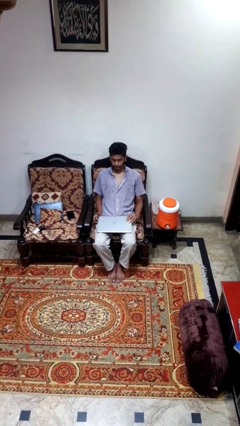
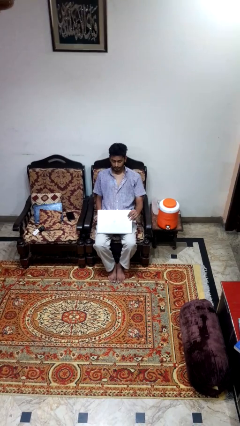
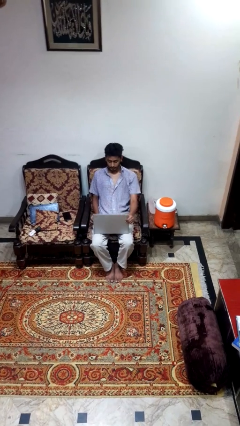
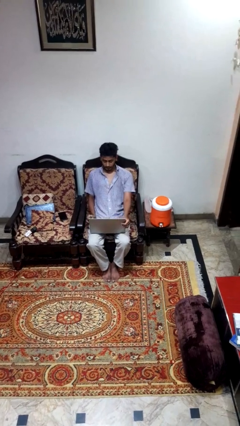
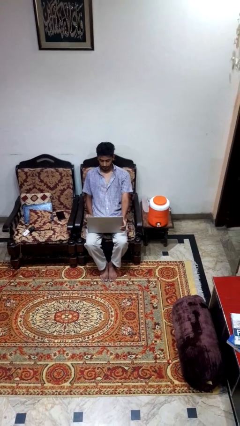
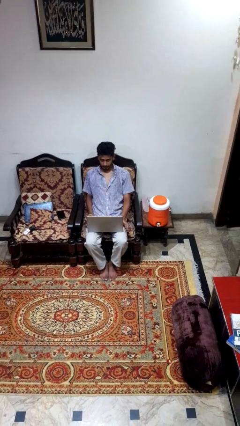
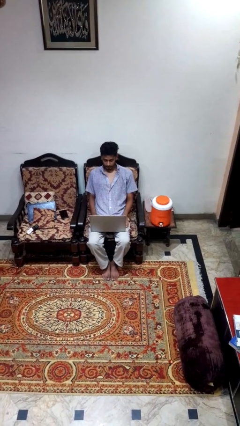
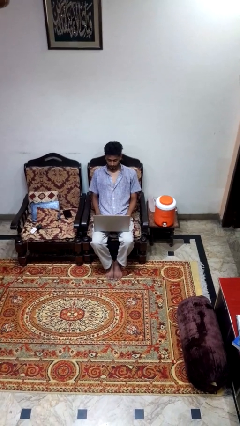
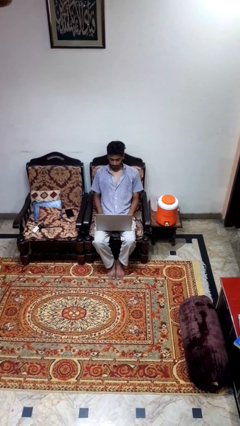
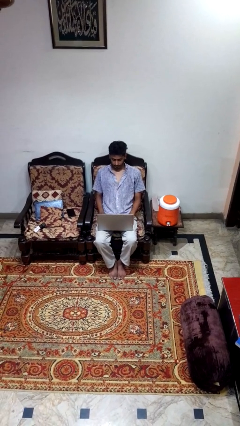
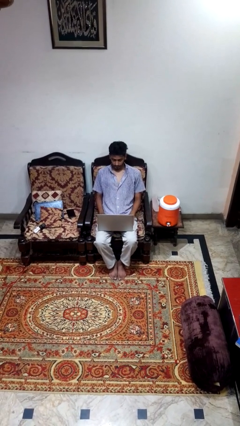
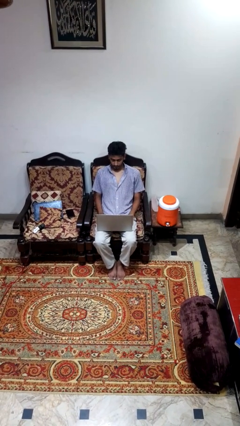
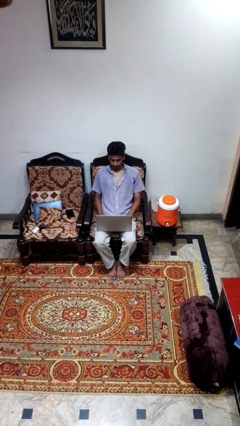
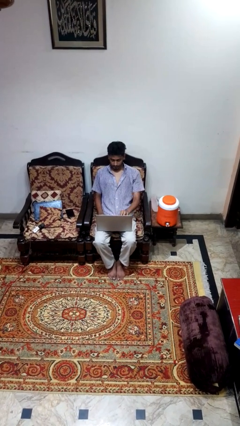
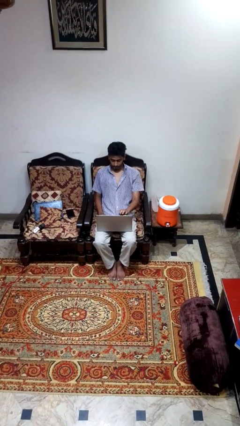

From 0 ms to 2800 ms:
person opens laptop

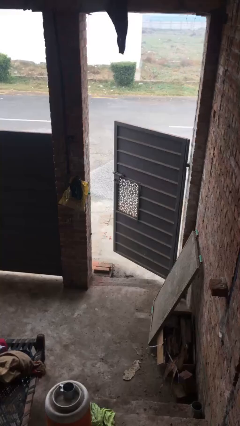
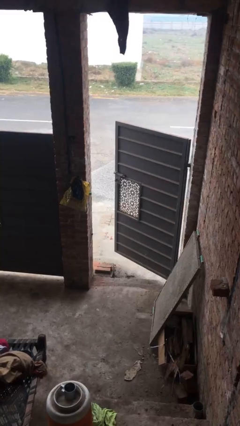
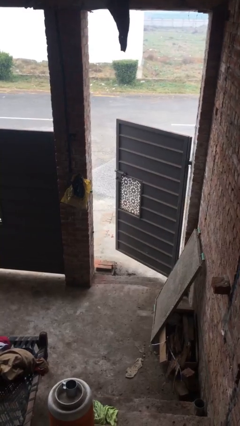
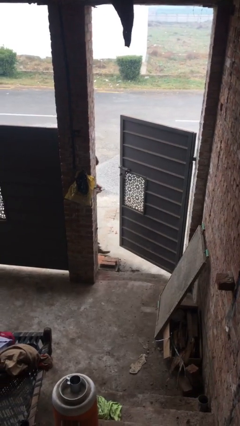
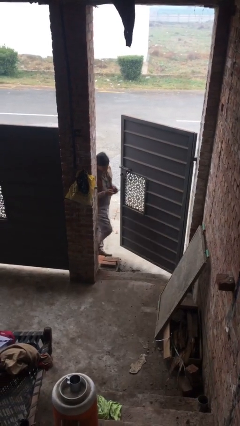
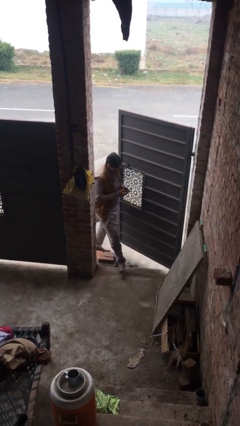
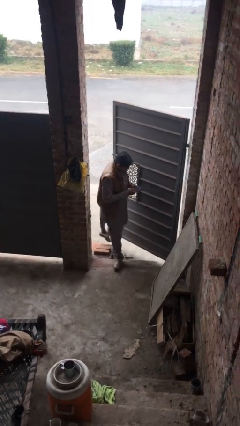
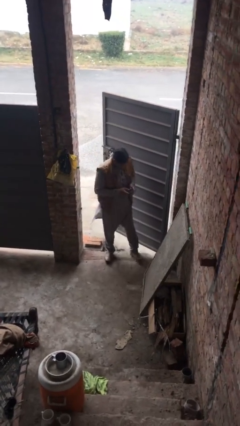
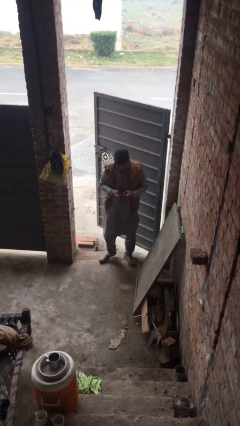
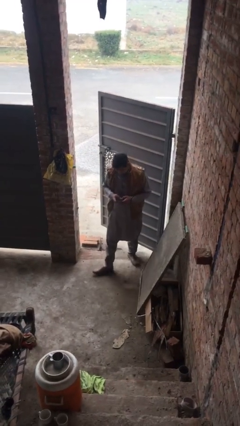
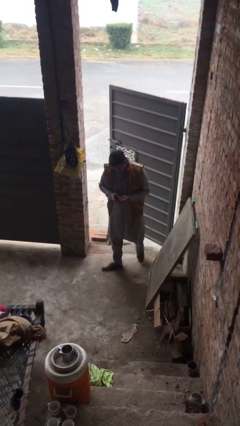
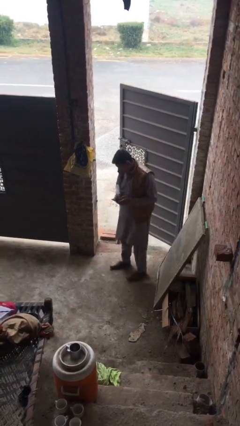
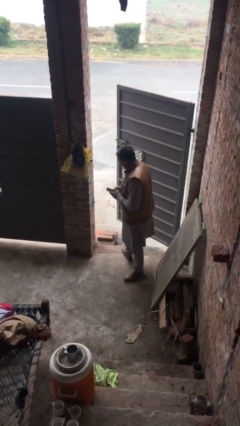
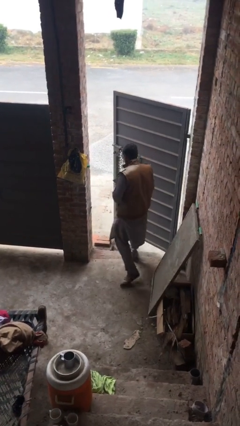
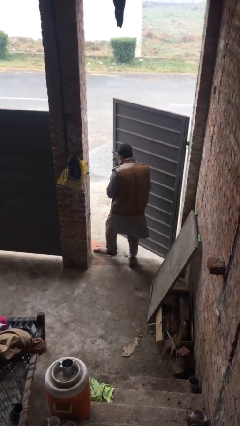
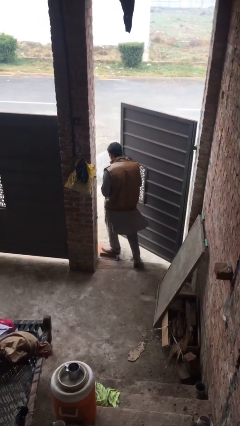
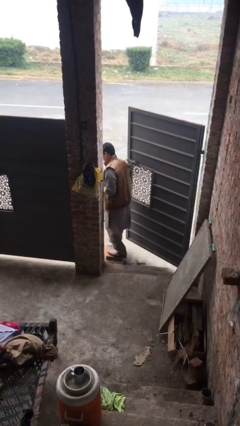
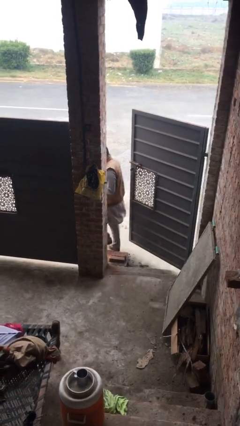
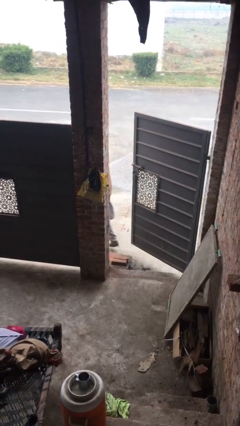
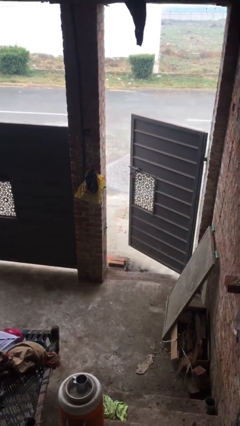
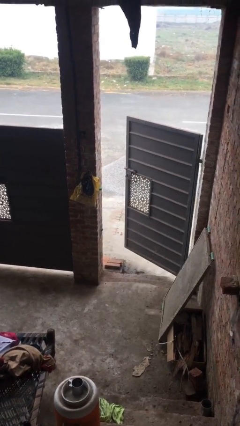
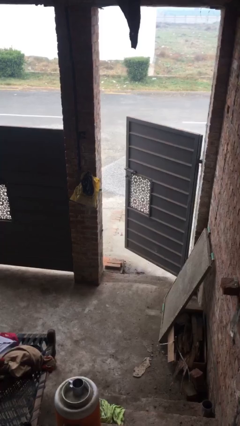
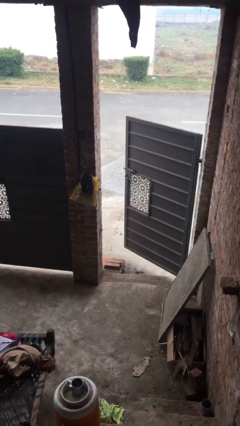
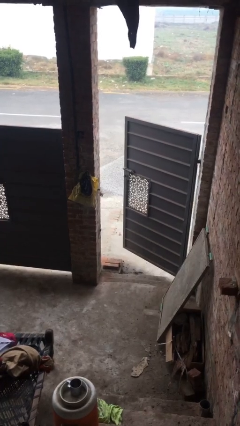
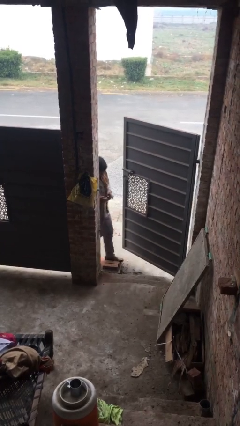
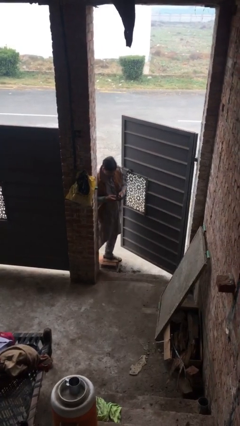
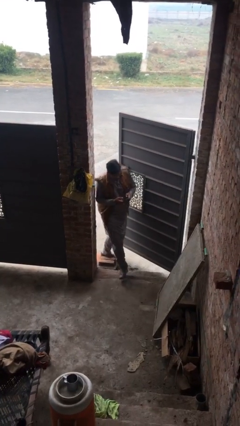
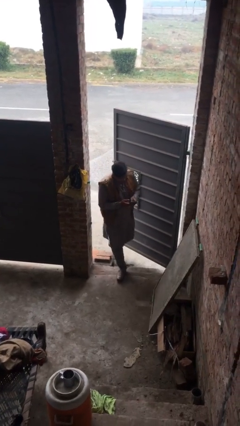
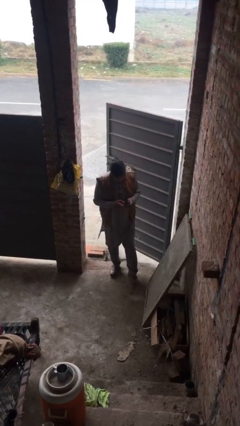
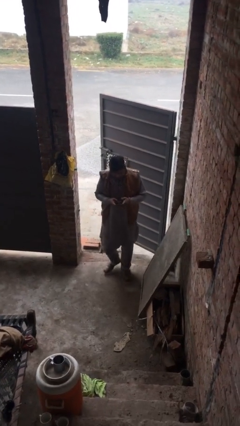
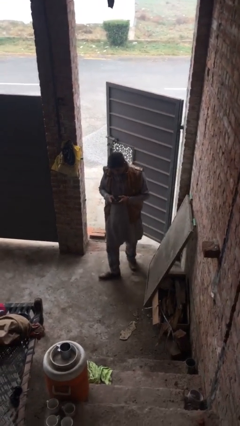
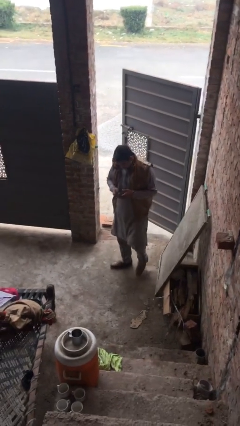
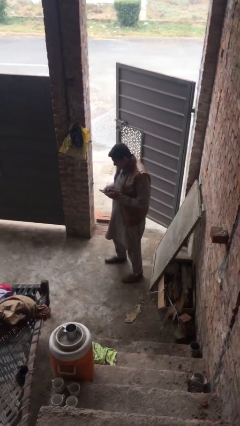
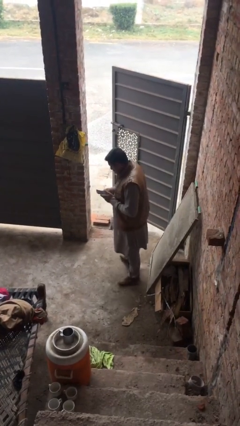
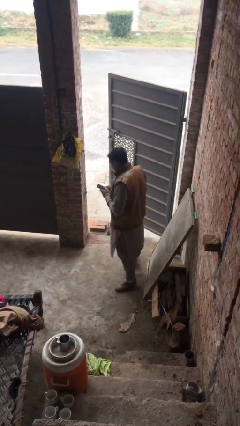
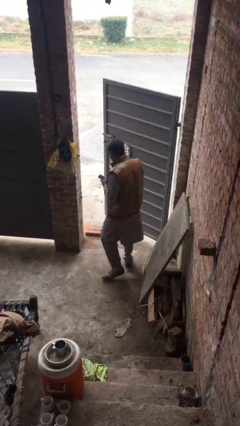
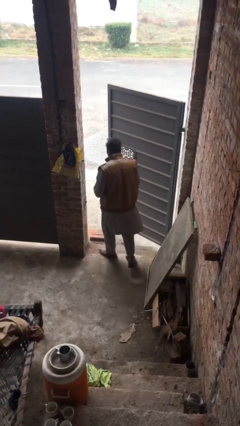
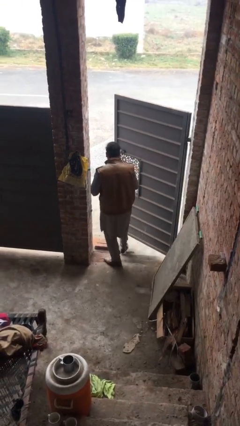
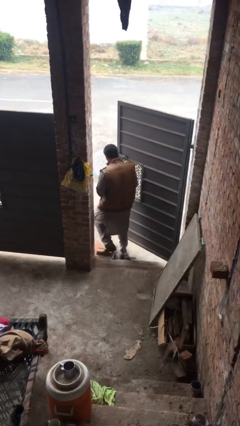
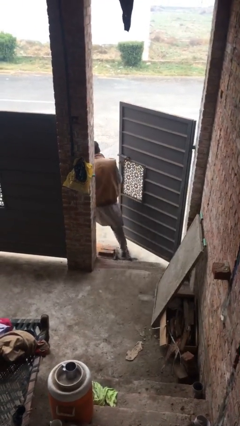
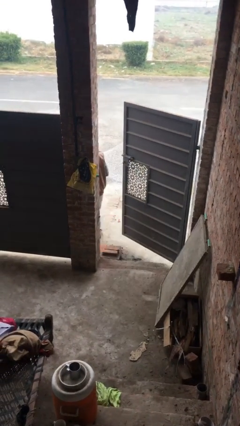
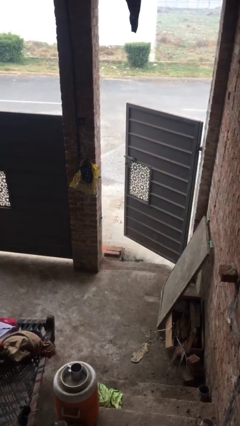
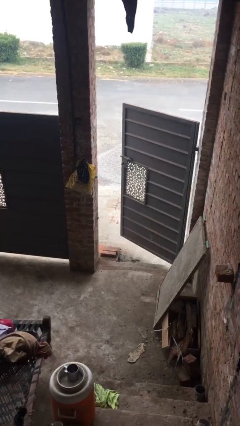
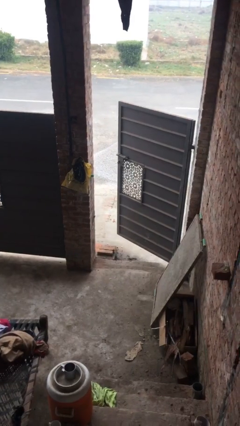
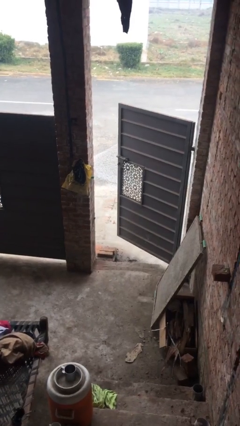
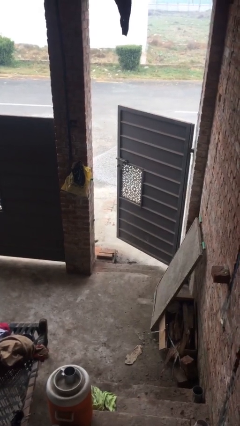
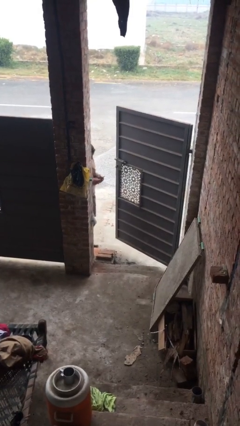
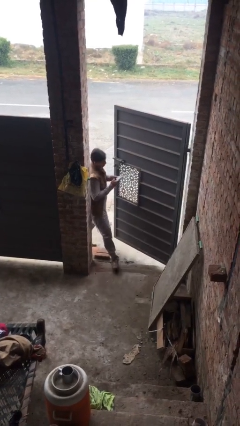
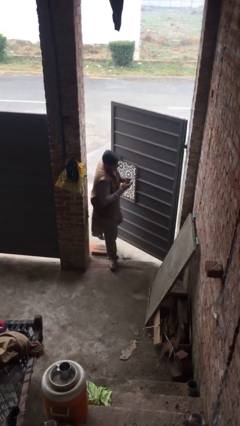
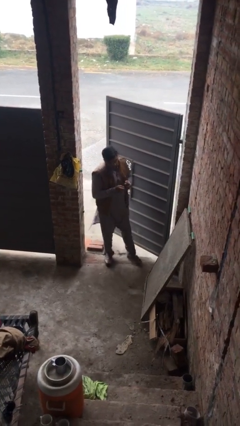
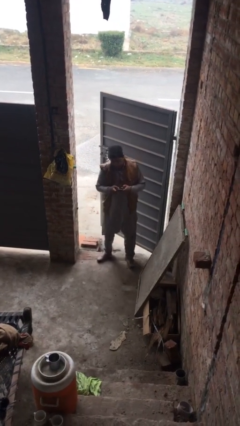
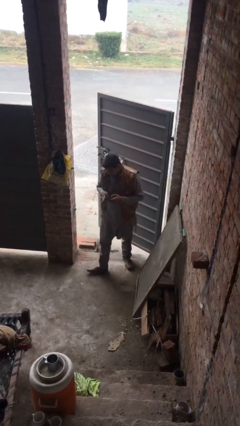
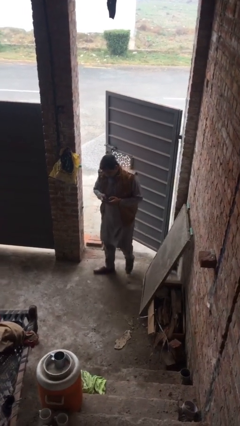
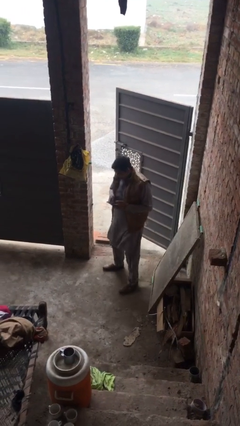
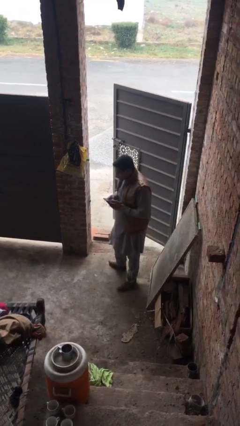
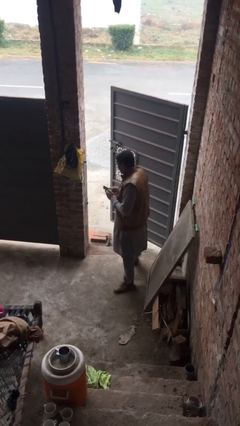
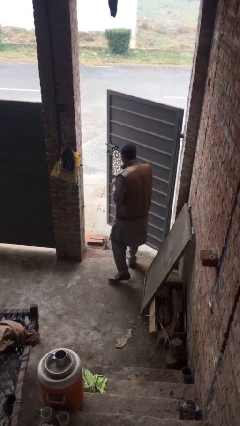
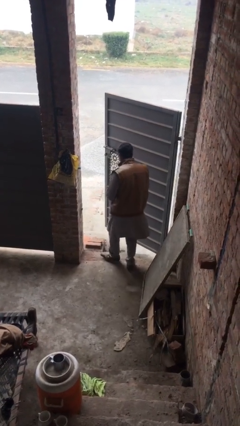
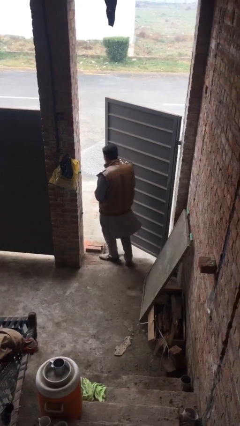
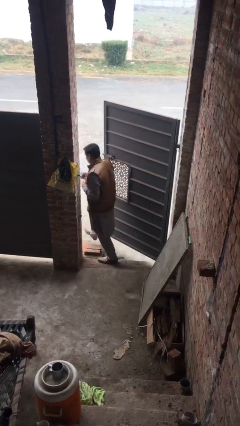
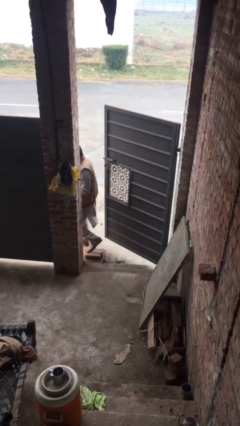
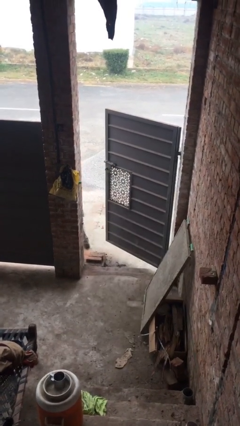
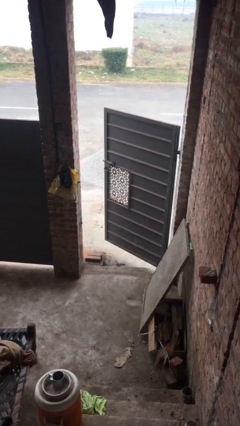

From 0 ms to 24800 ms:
person texts on phone

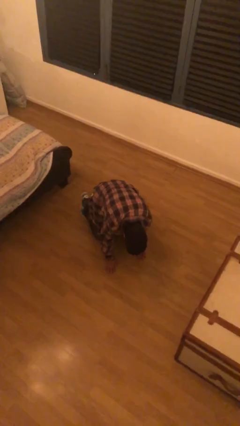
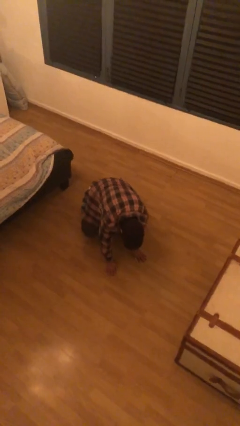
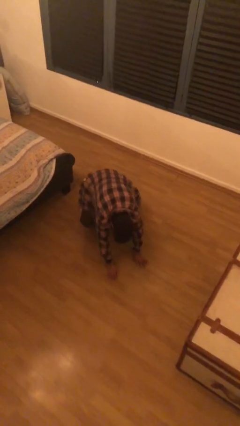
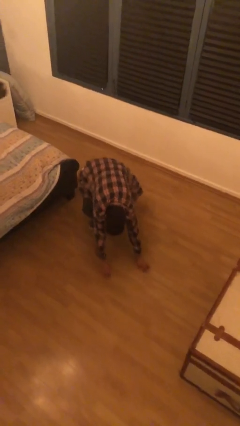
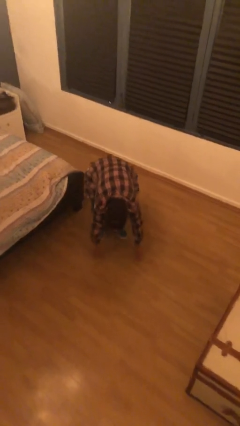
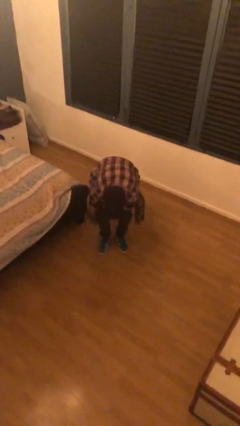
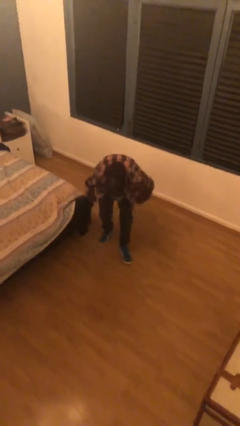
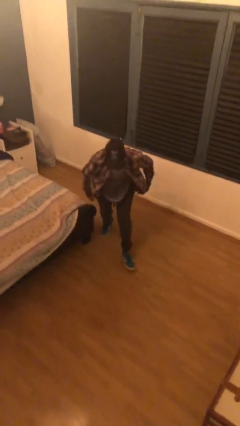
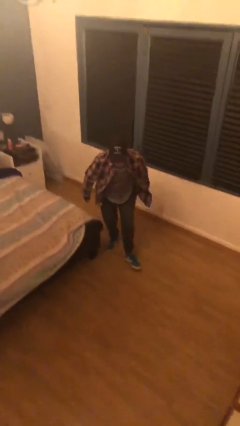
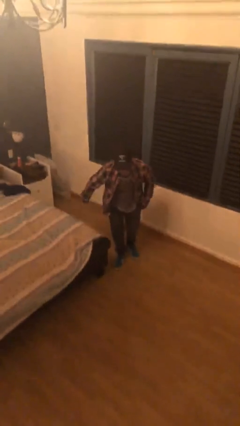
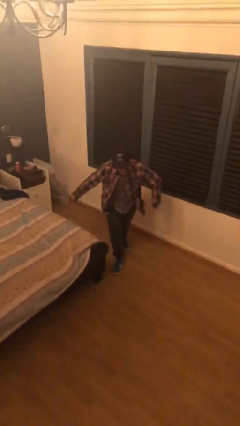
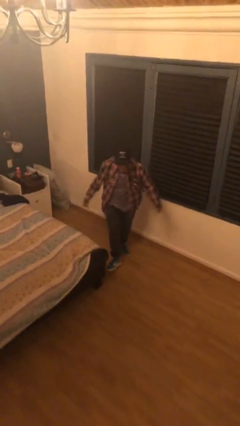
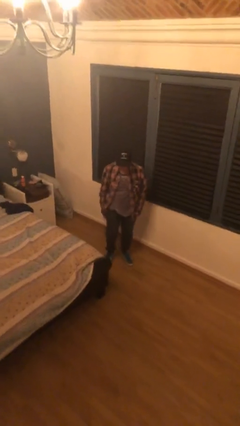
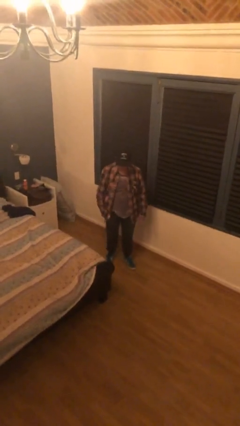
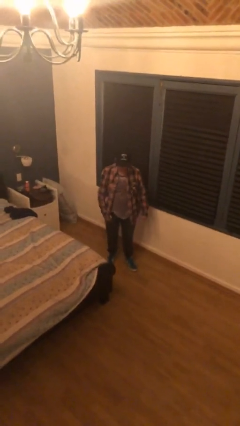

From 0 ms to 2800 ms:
person stands up from floor

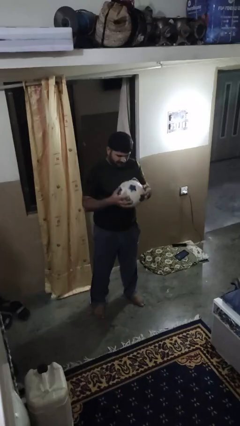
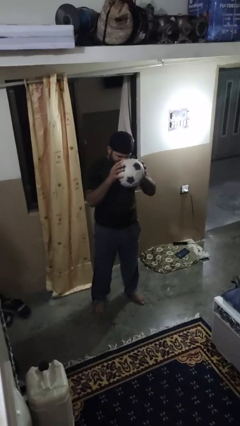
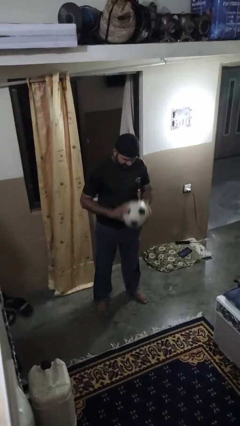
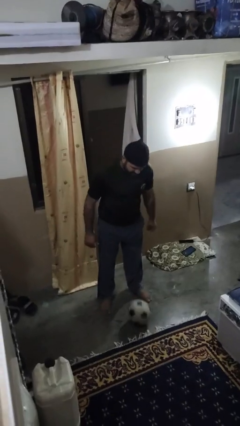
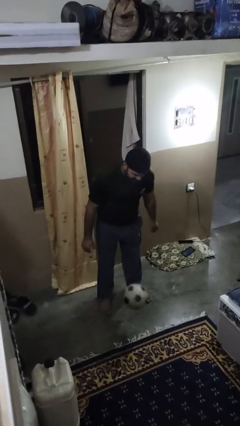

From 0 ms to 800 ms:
person bounces ball on floor
